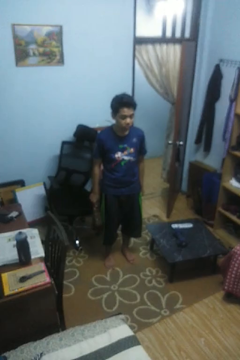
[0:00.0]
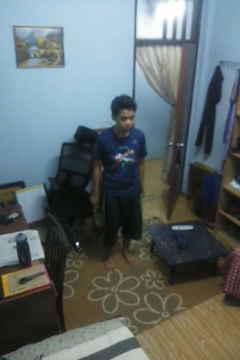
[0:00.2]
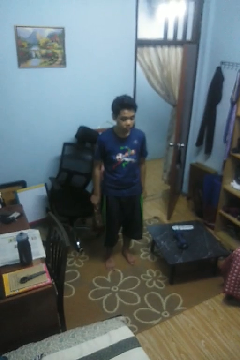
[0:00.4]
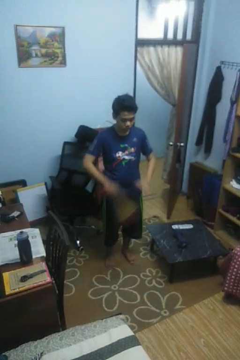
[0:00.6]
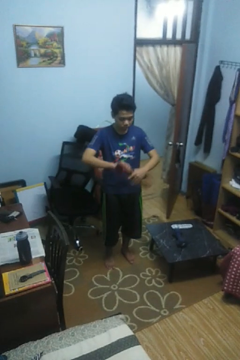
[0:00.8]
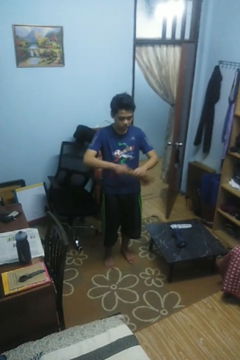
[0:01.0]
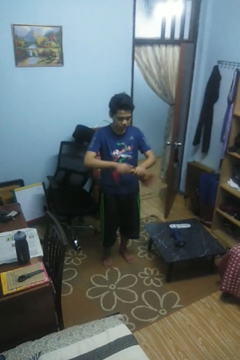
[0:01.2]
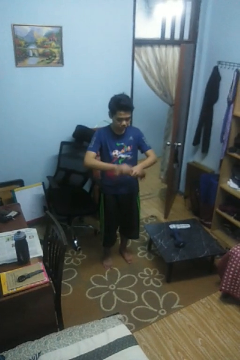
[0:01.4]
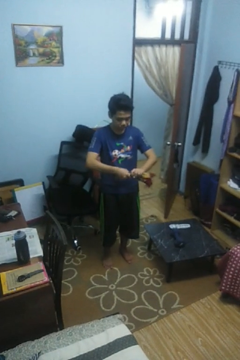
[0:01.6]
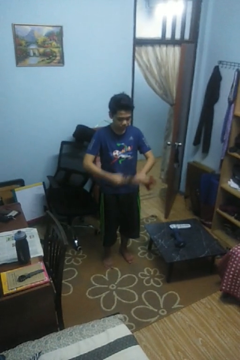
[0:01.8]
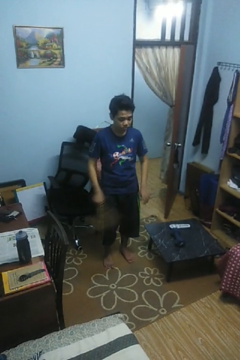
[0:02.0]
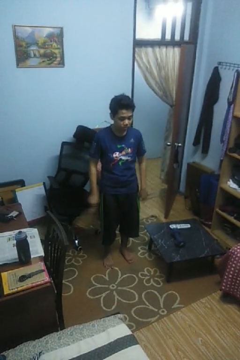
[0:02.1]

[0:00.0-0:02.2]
person squeezes object

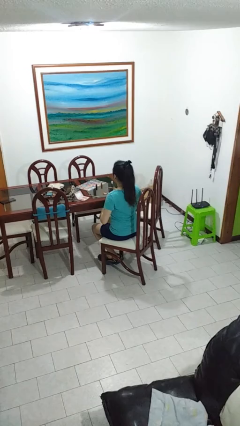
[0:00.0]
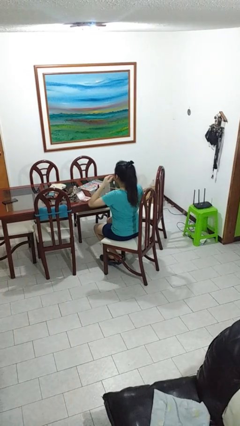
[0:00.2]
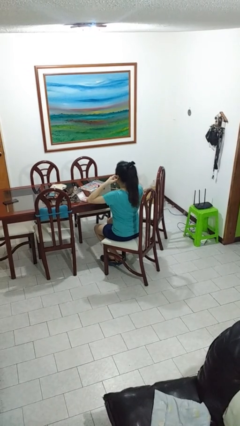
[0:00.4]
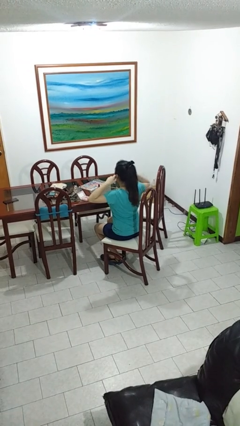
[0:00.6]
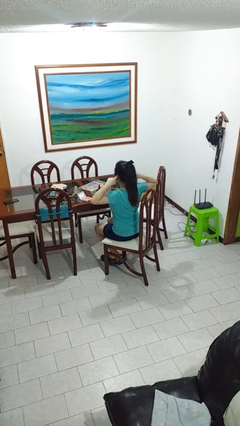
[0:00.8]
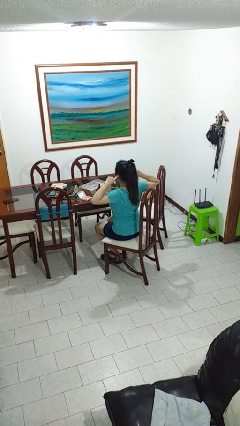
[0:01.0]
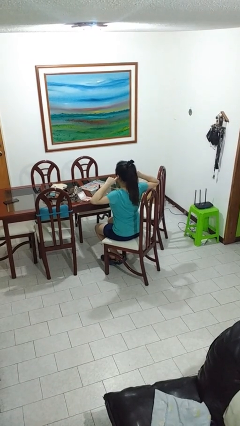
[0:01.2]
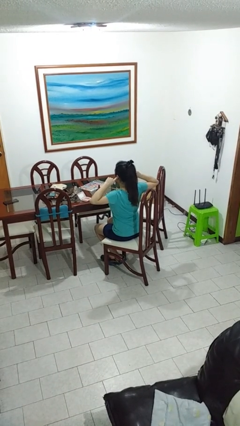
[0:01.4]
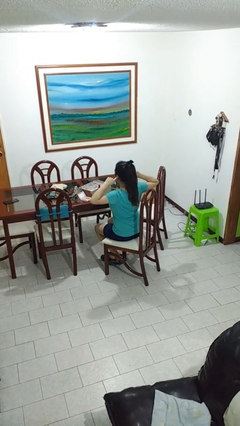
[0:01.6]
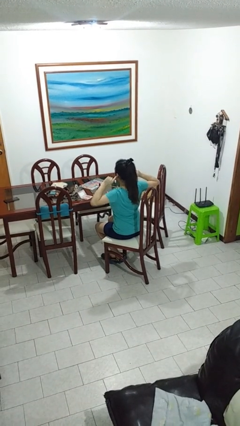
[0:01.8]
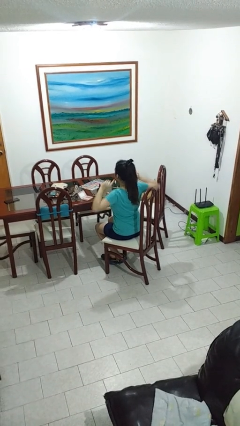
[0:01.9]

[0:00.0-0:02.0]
person puts fingers in ear

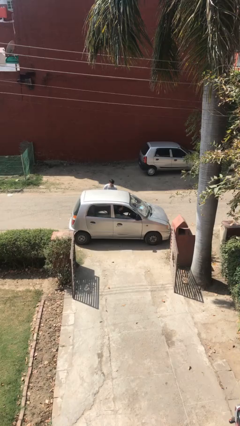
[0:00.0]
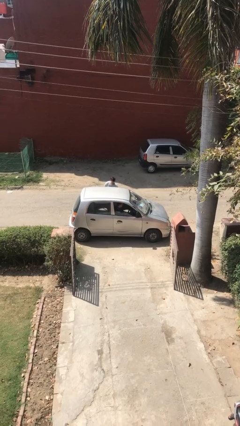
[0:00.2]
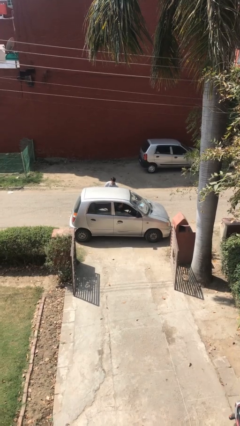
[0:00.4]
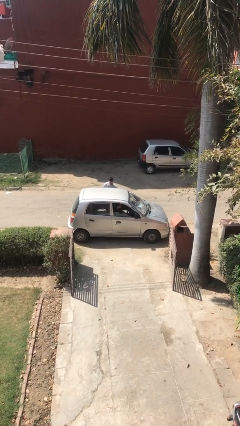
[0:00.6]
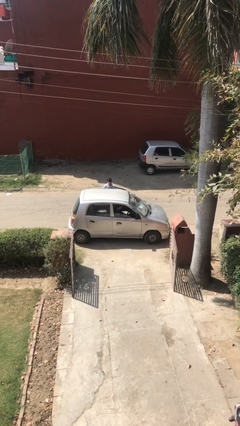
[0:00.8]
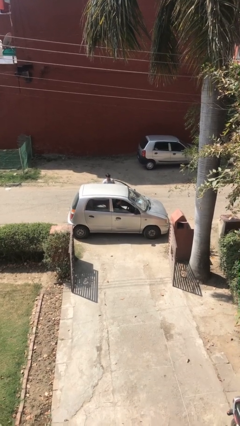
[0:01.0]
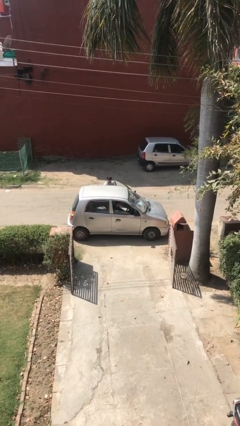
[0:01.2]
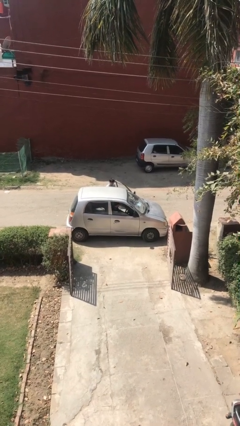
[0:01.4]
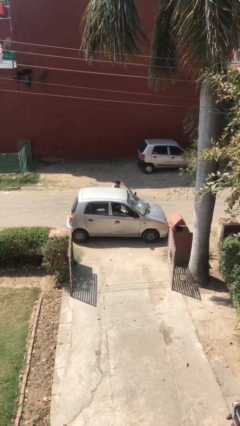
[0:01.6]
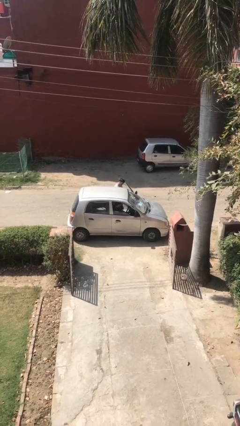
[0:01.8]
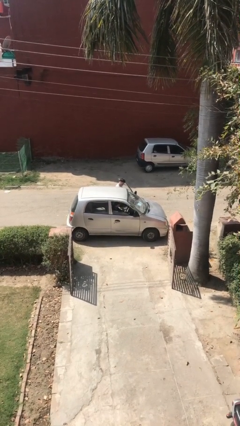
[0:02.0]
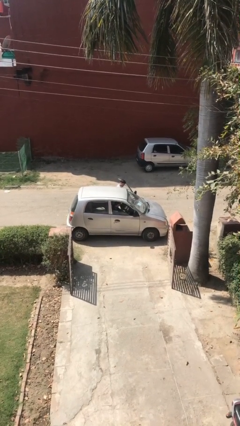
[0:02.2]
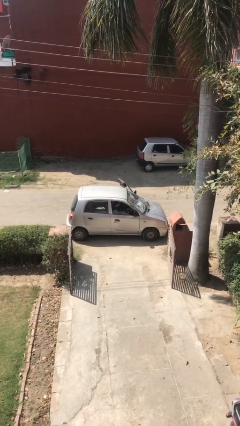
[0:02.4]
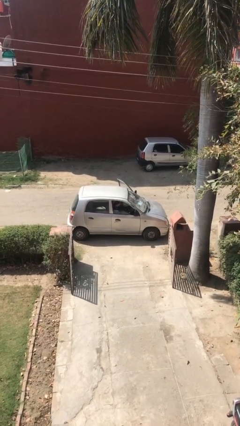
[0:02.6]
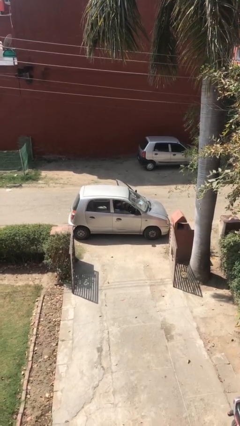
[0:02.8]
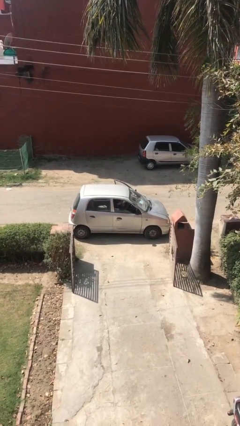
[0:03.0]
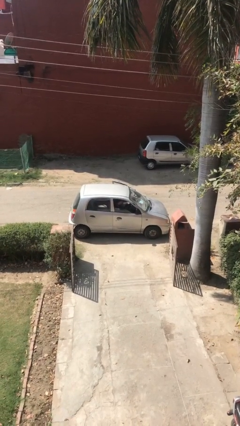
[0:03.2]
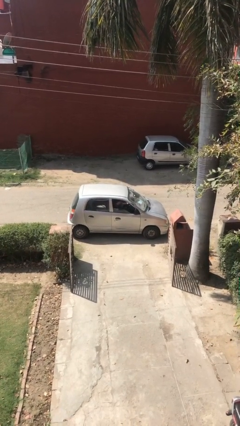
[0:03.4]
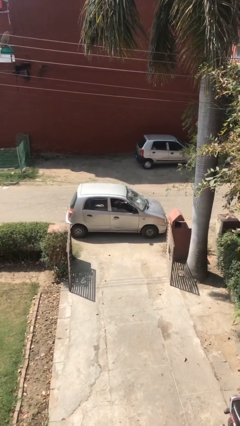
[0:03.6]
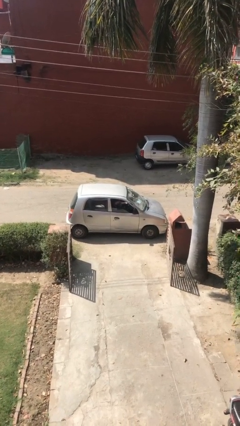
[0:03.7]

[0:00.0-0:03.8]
car picks up person

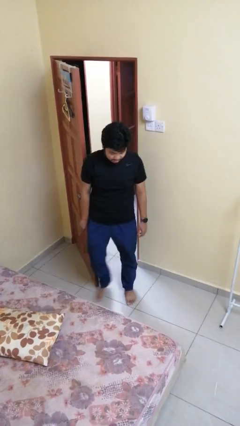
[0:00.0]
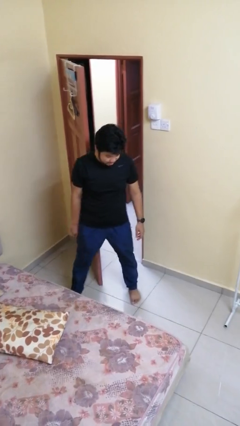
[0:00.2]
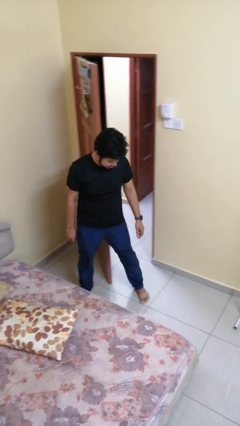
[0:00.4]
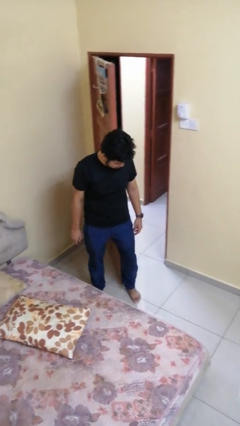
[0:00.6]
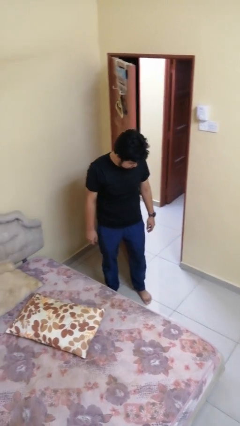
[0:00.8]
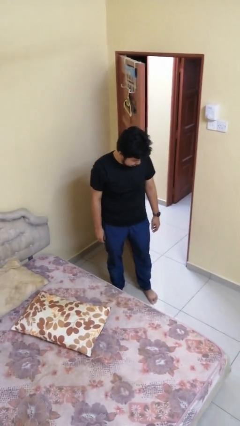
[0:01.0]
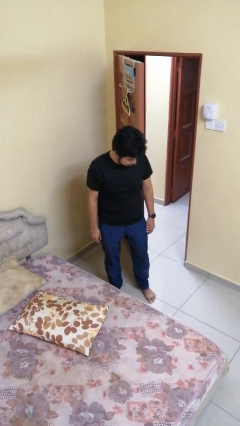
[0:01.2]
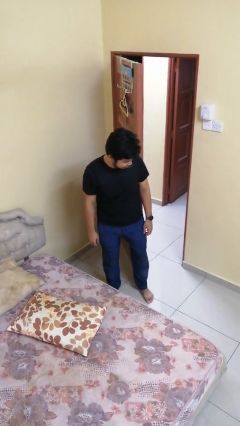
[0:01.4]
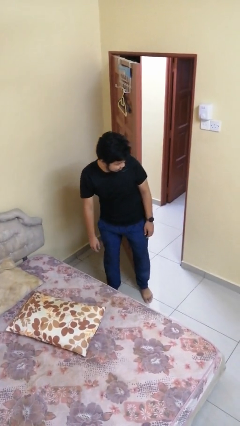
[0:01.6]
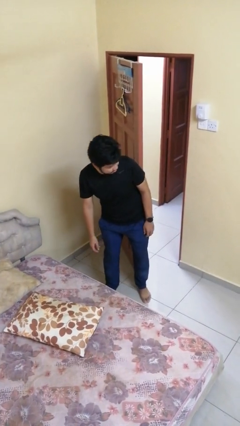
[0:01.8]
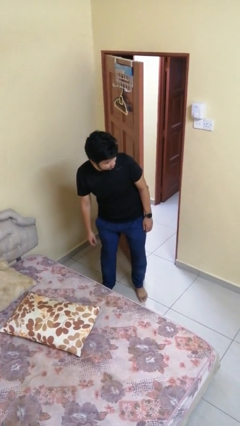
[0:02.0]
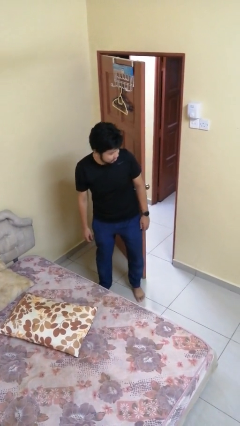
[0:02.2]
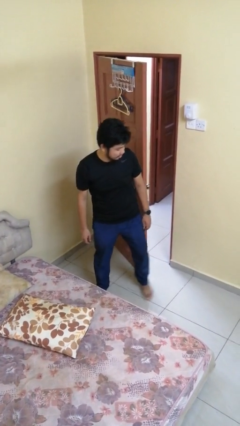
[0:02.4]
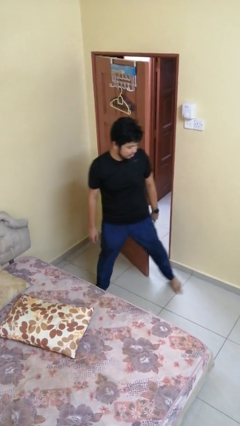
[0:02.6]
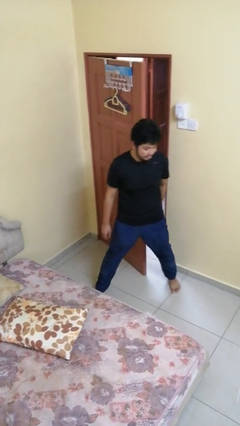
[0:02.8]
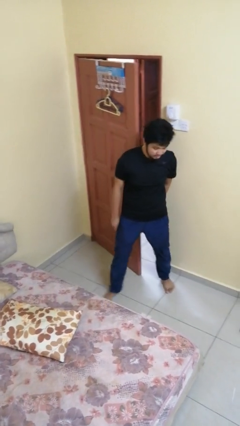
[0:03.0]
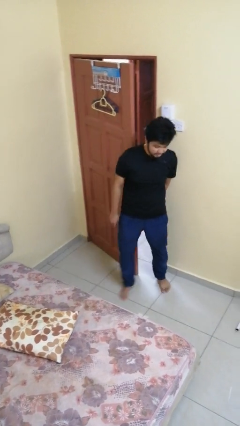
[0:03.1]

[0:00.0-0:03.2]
person closes door with hip

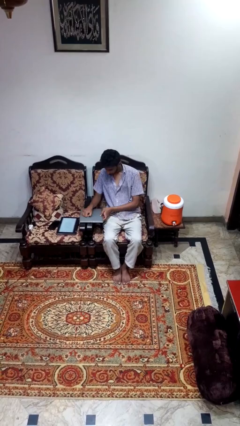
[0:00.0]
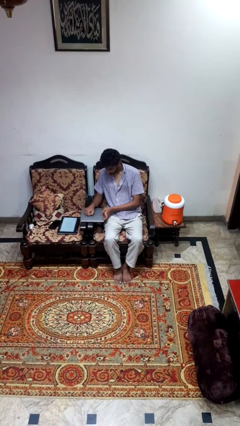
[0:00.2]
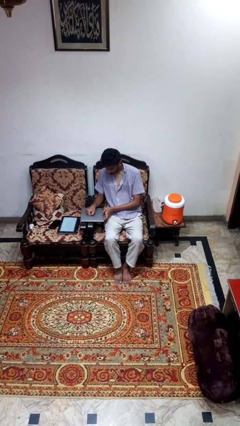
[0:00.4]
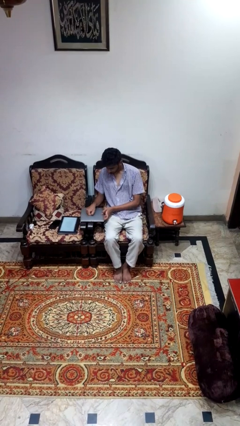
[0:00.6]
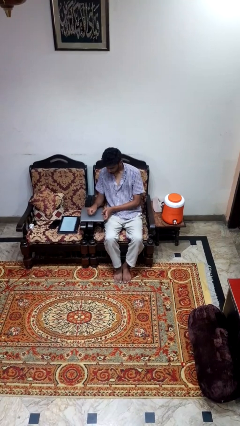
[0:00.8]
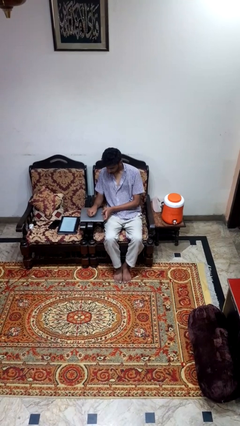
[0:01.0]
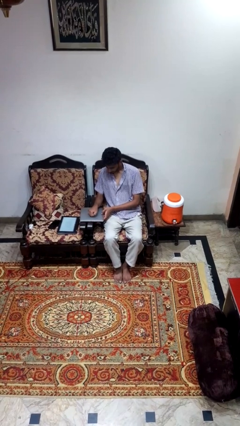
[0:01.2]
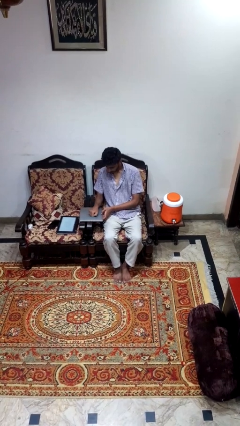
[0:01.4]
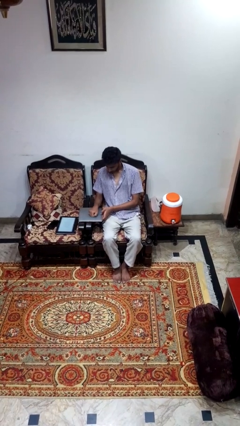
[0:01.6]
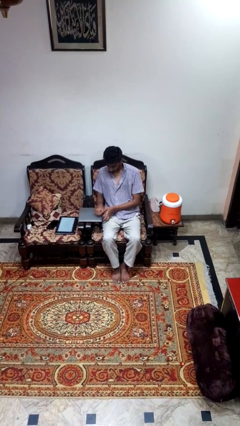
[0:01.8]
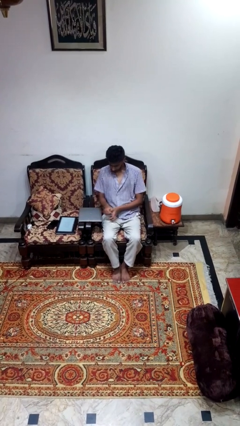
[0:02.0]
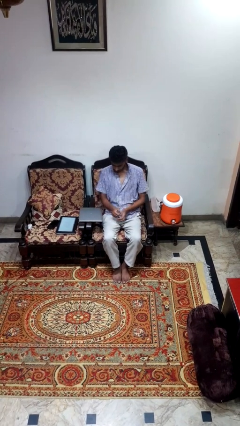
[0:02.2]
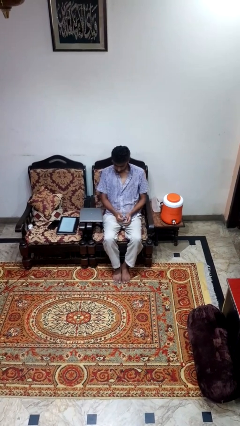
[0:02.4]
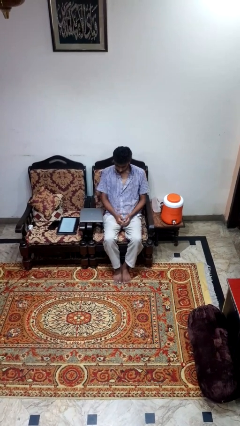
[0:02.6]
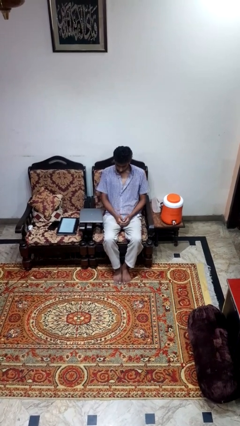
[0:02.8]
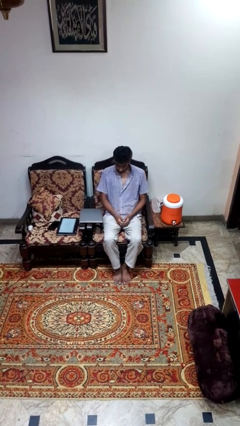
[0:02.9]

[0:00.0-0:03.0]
person taps object with finger

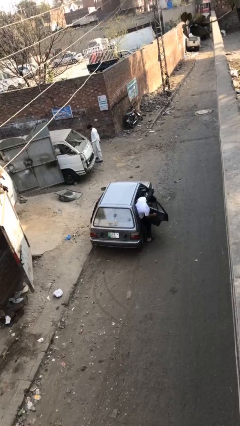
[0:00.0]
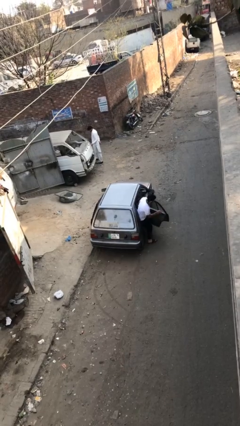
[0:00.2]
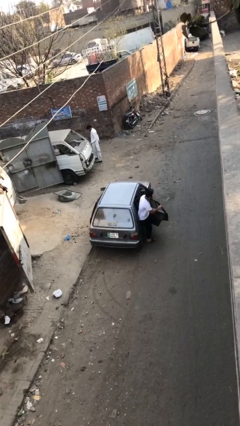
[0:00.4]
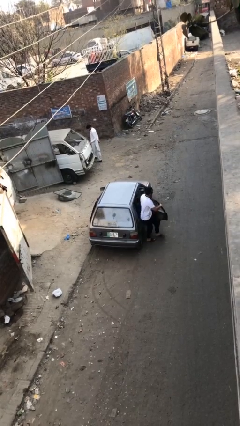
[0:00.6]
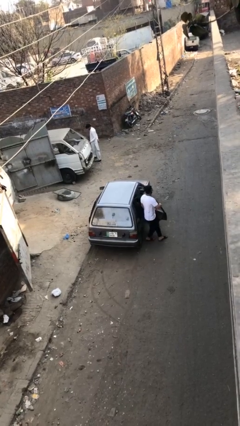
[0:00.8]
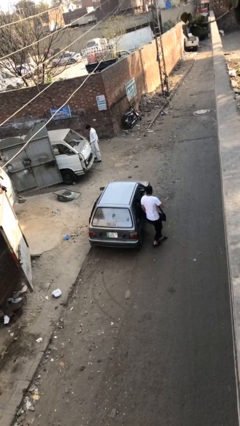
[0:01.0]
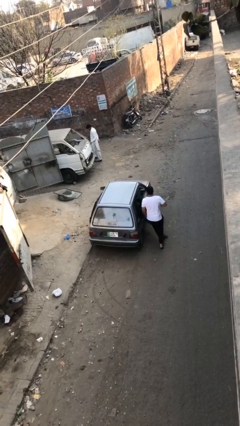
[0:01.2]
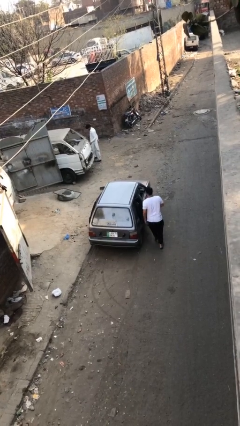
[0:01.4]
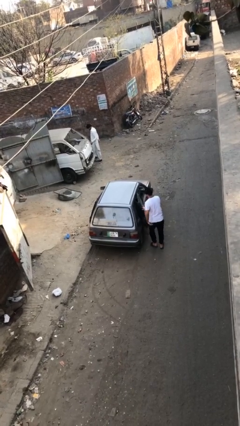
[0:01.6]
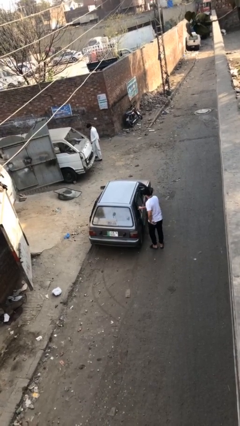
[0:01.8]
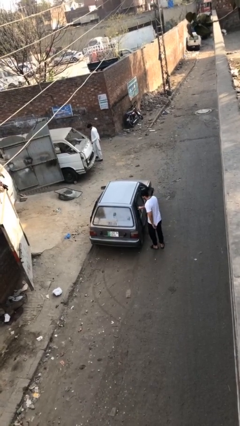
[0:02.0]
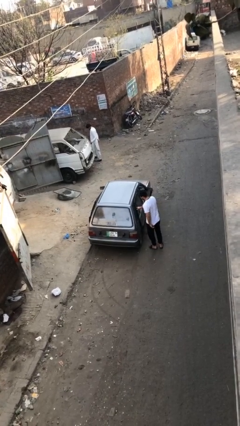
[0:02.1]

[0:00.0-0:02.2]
car drops off person

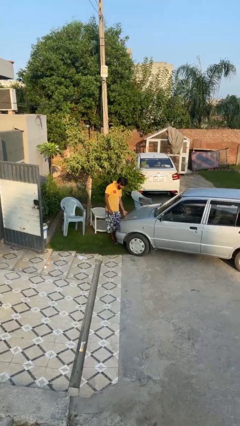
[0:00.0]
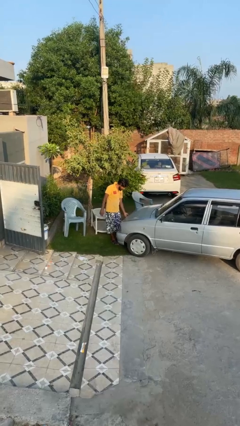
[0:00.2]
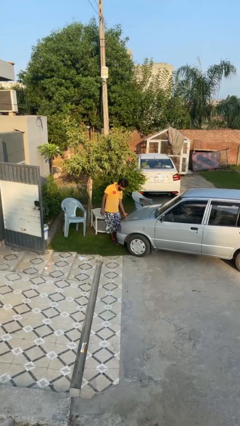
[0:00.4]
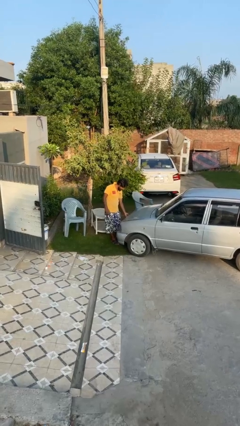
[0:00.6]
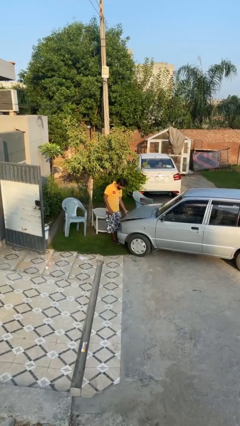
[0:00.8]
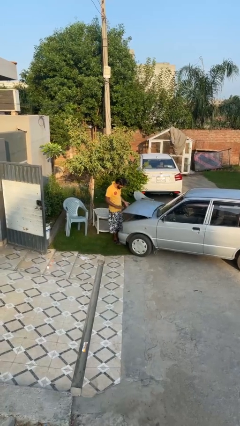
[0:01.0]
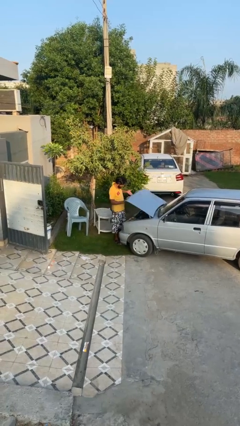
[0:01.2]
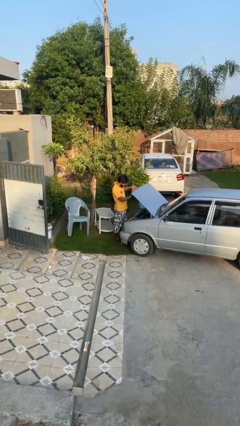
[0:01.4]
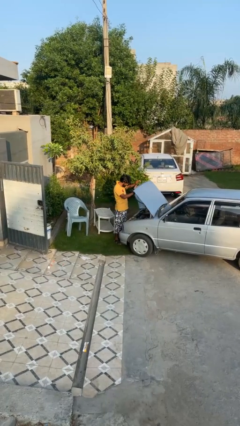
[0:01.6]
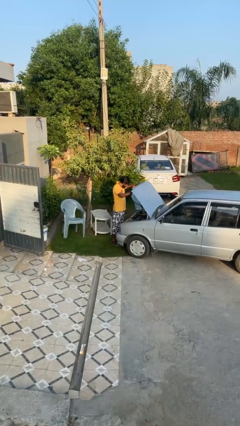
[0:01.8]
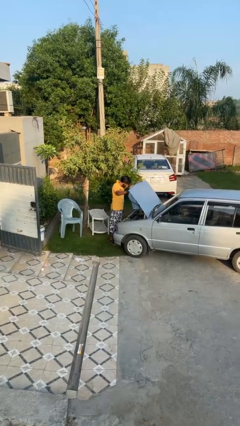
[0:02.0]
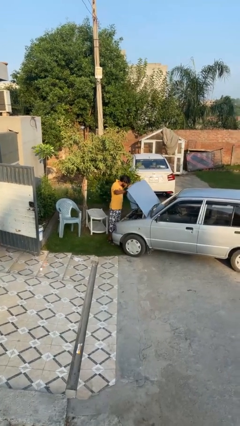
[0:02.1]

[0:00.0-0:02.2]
person opens car hood
